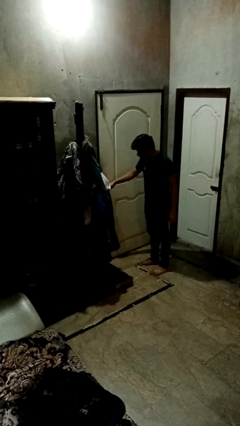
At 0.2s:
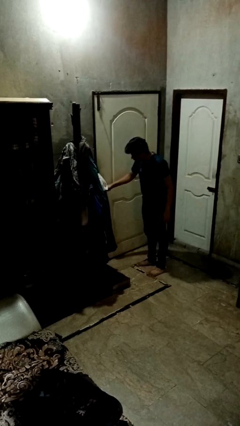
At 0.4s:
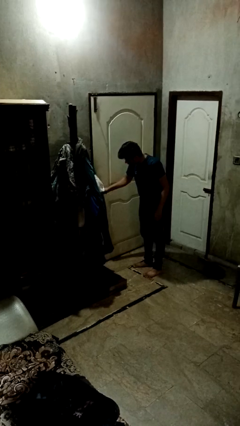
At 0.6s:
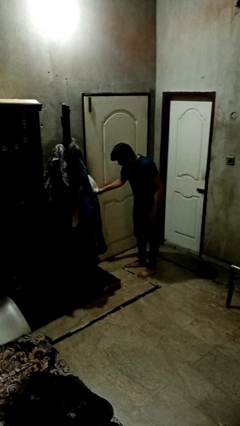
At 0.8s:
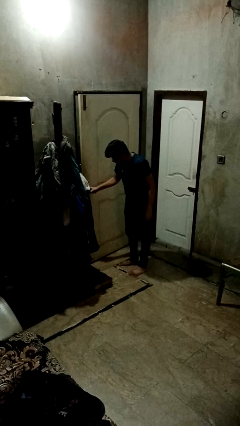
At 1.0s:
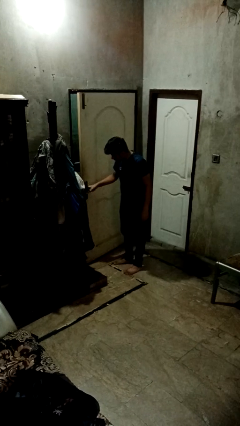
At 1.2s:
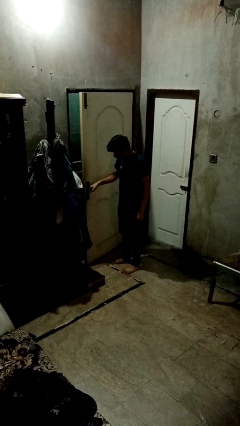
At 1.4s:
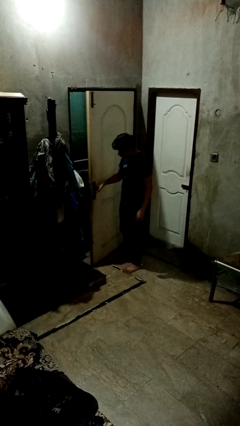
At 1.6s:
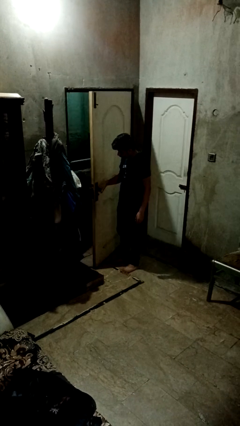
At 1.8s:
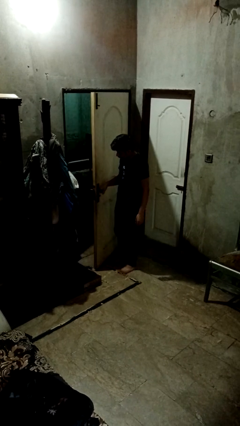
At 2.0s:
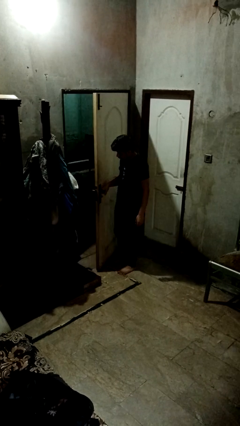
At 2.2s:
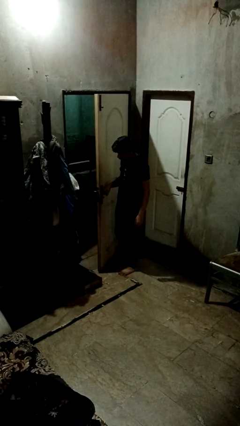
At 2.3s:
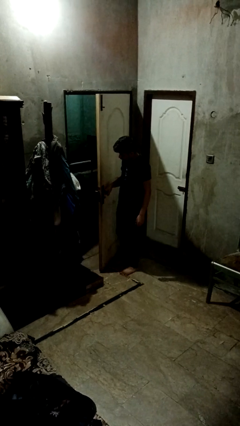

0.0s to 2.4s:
person opens facility door

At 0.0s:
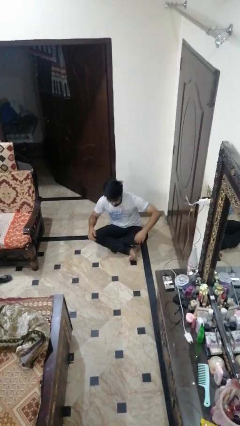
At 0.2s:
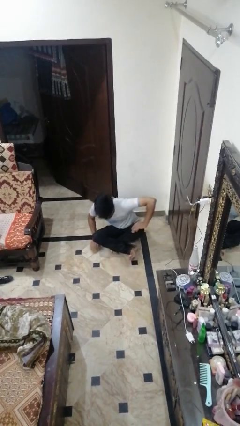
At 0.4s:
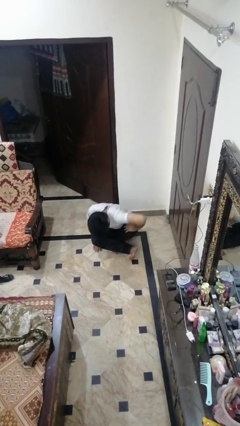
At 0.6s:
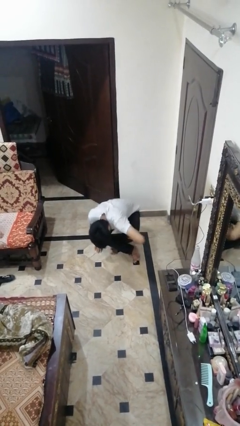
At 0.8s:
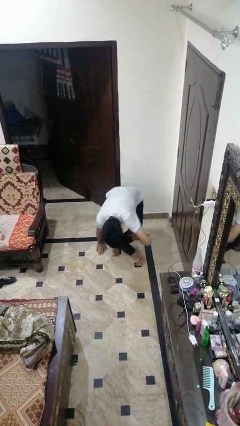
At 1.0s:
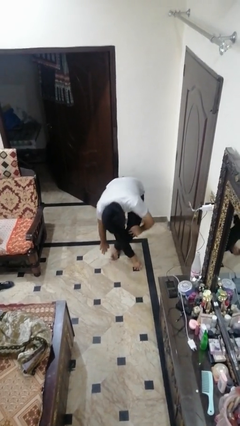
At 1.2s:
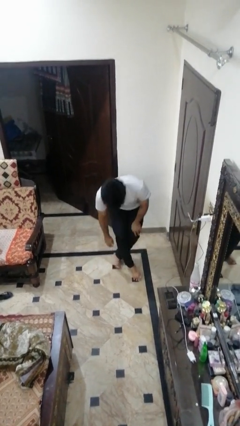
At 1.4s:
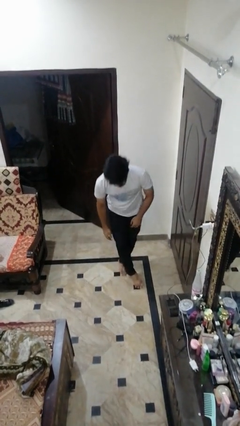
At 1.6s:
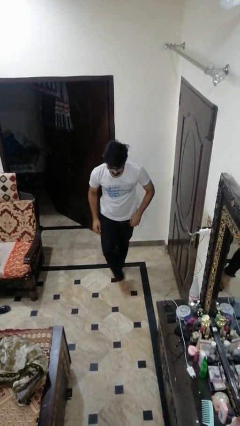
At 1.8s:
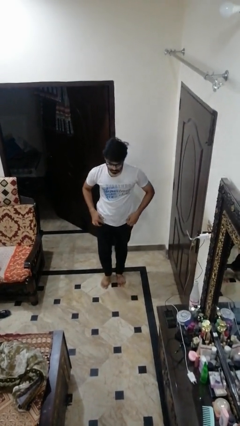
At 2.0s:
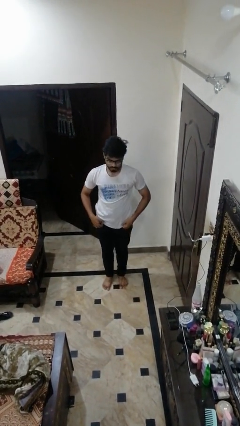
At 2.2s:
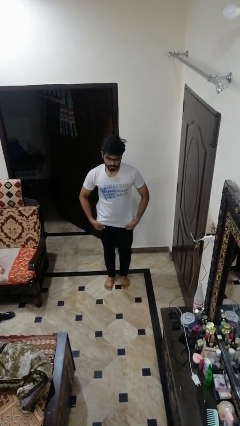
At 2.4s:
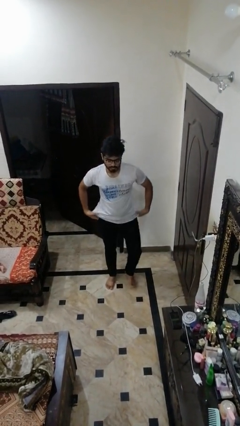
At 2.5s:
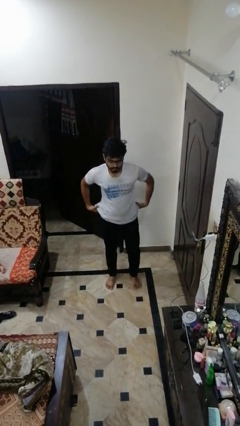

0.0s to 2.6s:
person stands up from floor

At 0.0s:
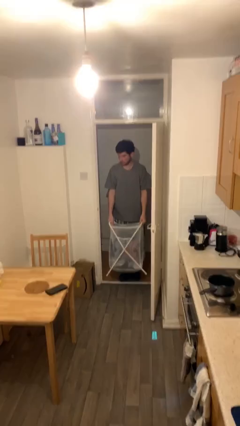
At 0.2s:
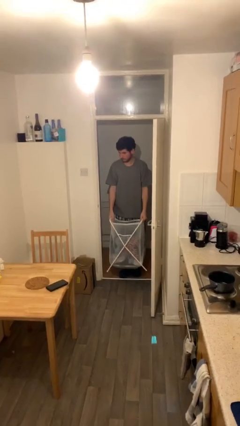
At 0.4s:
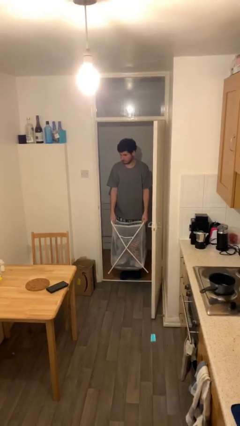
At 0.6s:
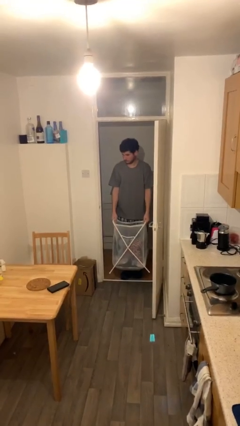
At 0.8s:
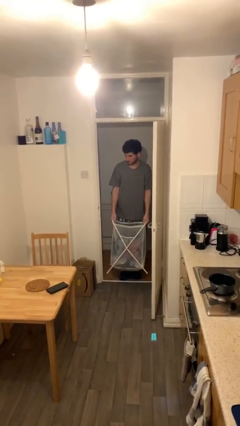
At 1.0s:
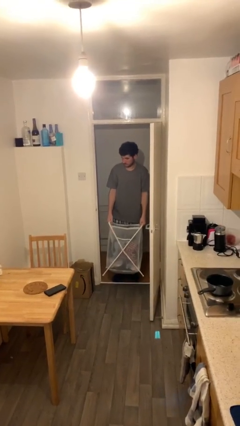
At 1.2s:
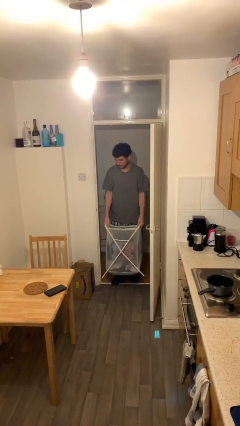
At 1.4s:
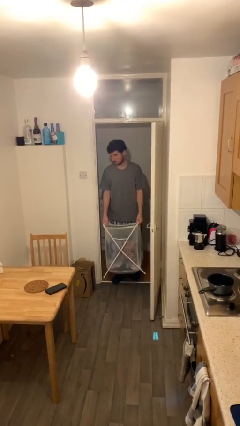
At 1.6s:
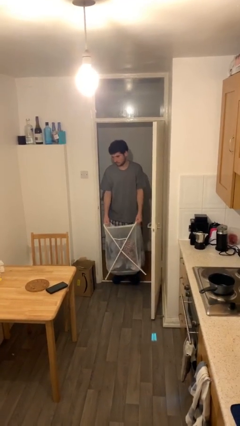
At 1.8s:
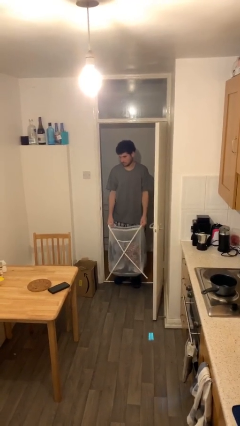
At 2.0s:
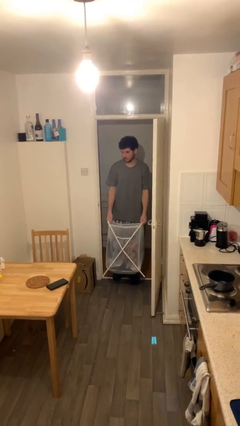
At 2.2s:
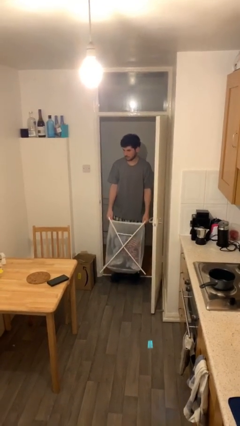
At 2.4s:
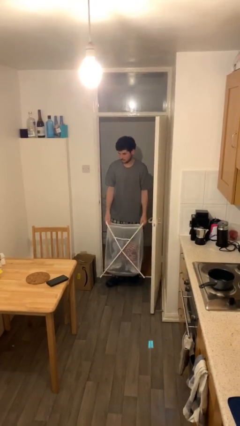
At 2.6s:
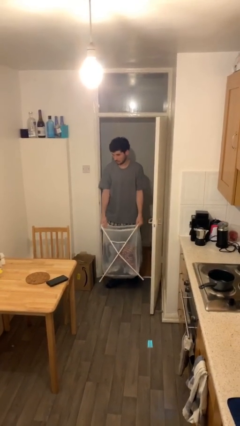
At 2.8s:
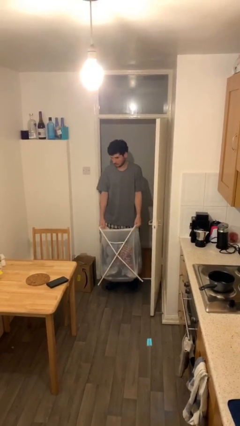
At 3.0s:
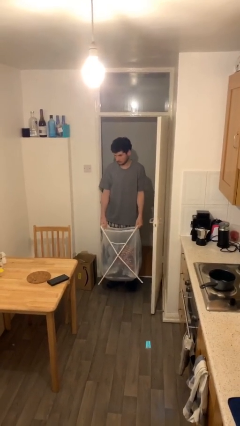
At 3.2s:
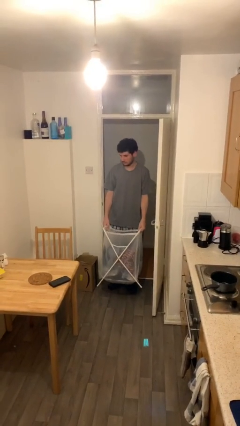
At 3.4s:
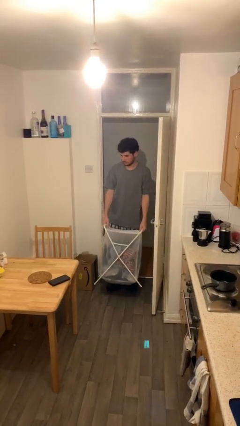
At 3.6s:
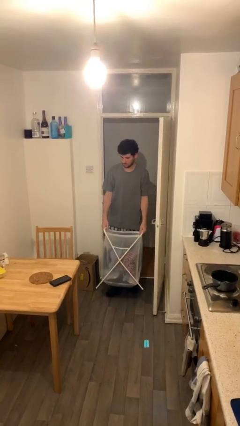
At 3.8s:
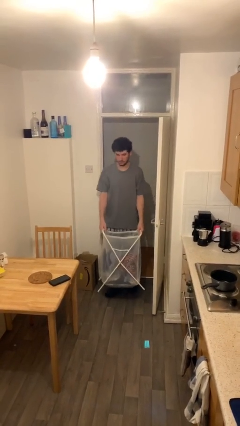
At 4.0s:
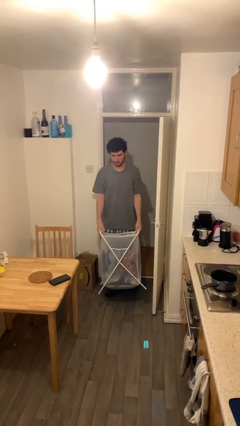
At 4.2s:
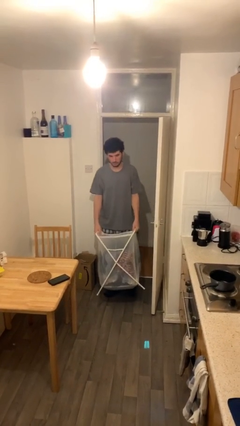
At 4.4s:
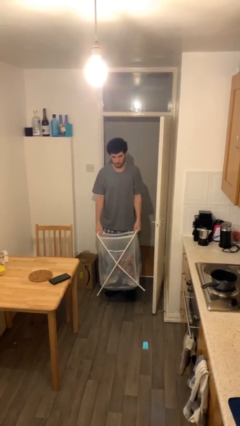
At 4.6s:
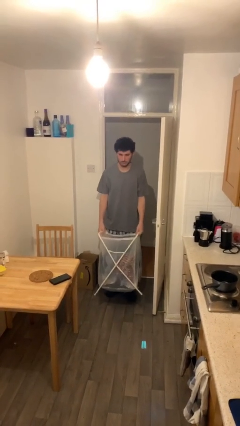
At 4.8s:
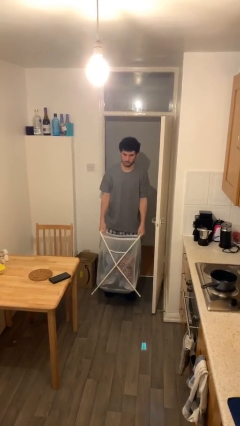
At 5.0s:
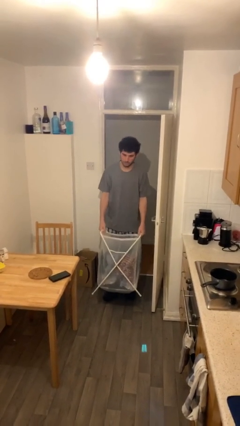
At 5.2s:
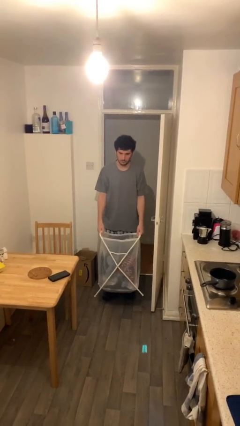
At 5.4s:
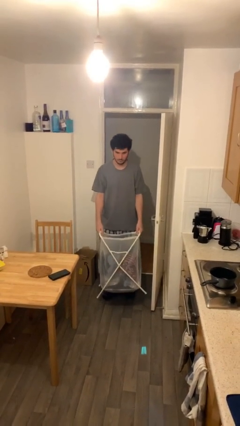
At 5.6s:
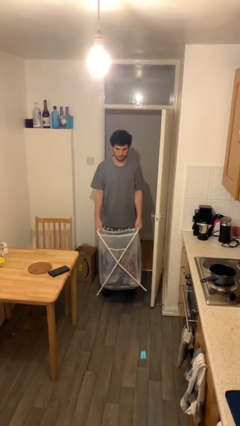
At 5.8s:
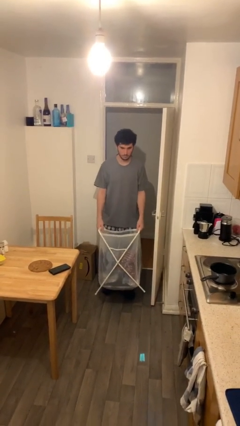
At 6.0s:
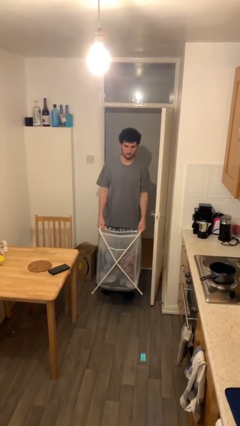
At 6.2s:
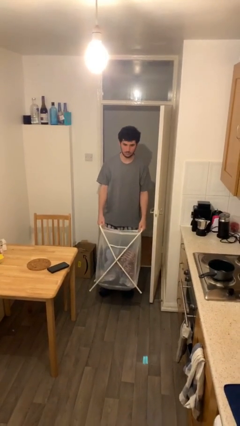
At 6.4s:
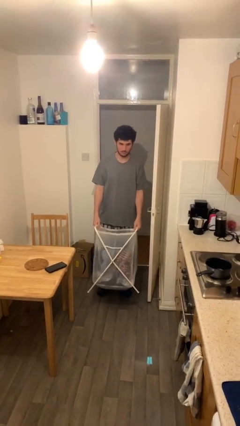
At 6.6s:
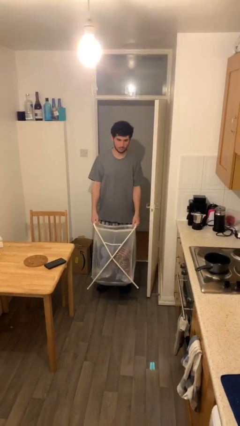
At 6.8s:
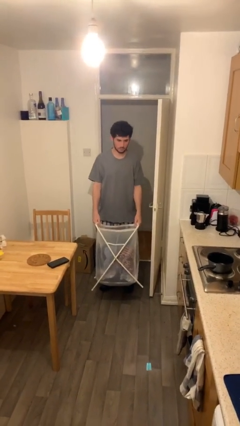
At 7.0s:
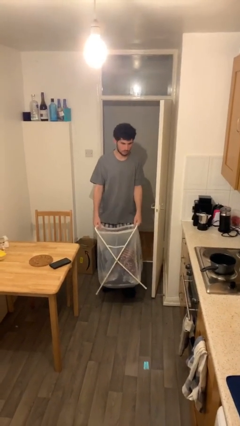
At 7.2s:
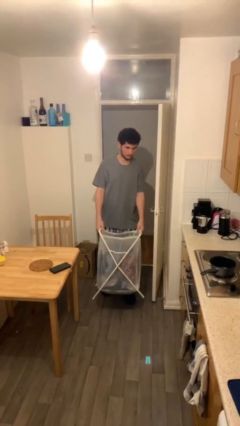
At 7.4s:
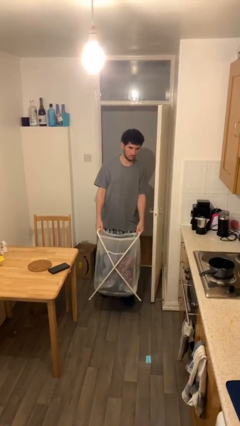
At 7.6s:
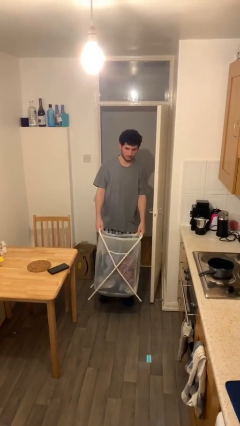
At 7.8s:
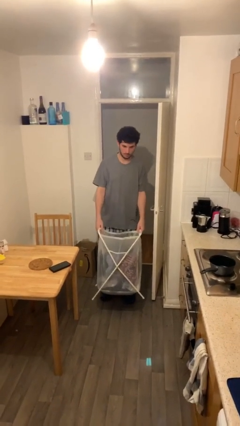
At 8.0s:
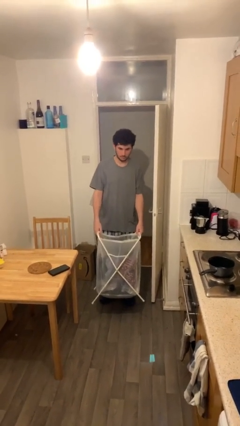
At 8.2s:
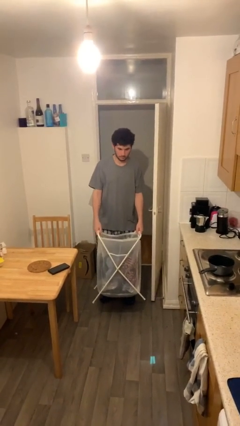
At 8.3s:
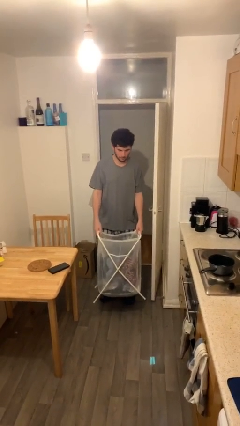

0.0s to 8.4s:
person carries heavy object

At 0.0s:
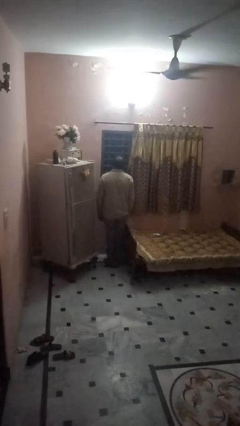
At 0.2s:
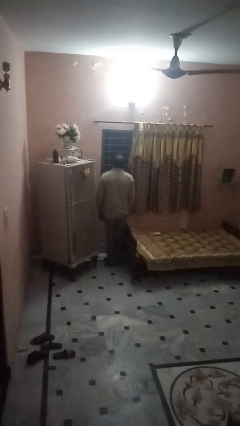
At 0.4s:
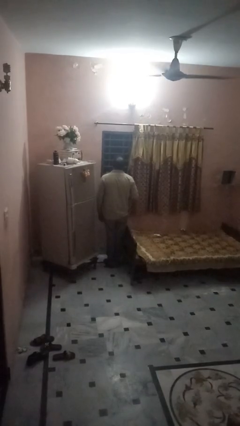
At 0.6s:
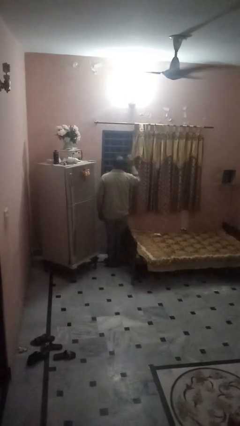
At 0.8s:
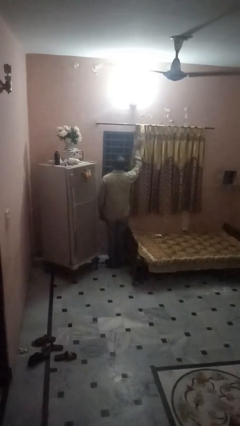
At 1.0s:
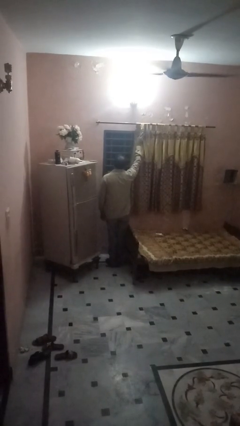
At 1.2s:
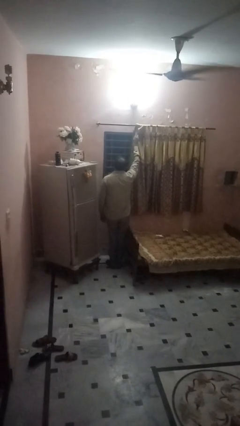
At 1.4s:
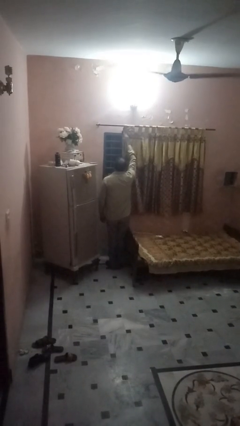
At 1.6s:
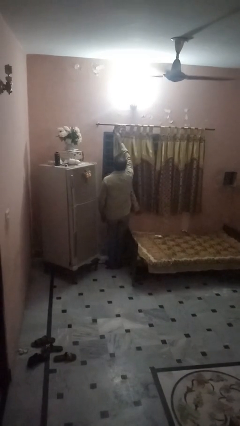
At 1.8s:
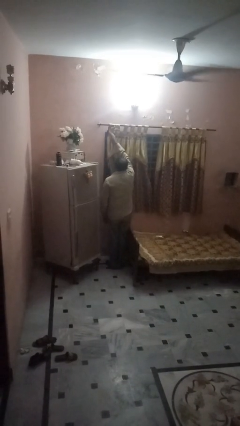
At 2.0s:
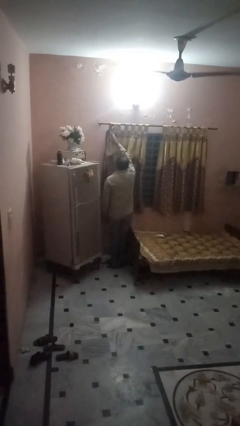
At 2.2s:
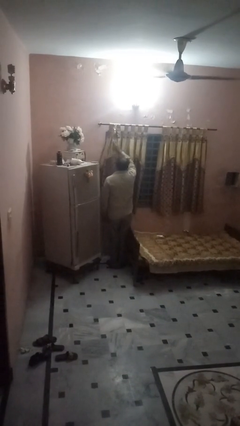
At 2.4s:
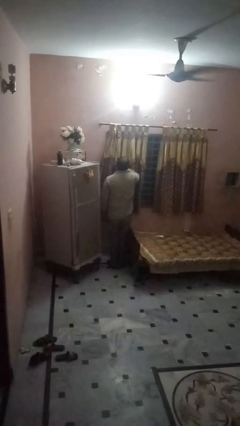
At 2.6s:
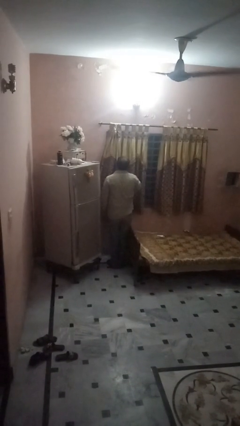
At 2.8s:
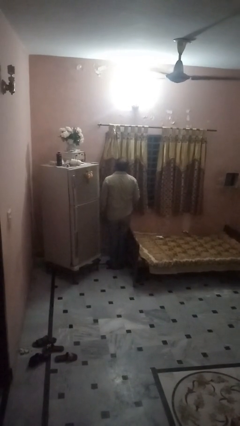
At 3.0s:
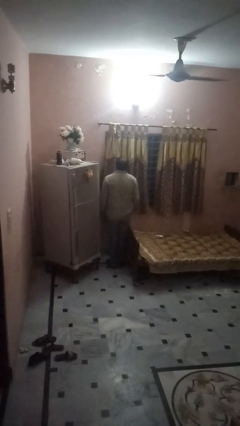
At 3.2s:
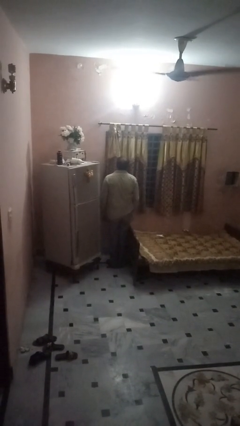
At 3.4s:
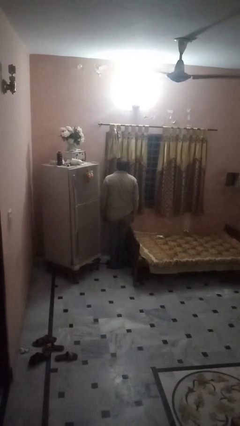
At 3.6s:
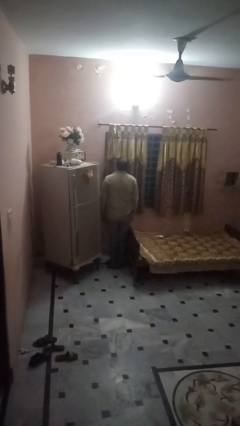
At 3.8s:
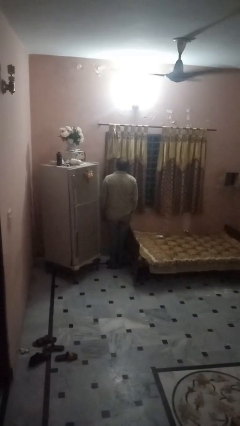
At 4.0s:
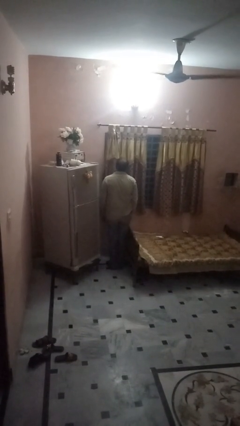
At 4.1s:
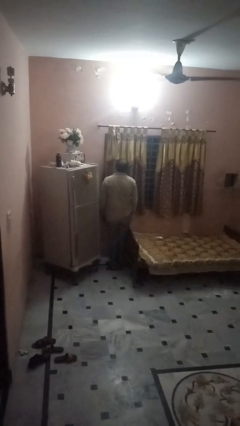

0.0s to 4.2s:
person closes curtains

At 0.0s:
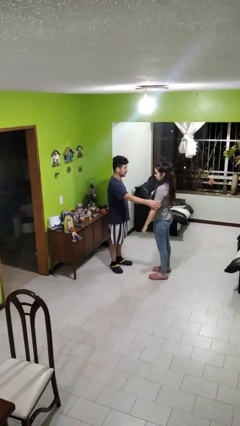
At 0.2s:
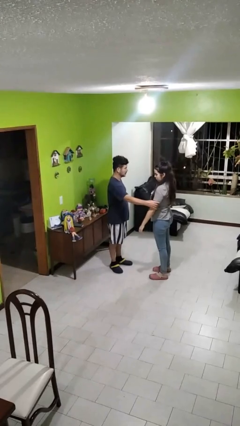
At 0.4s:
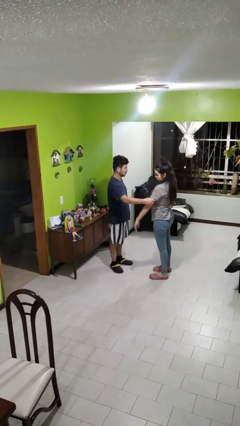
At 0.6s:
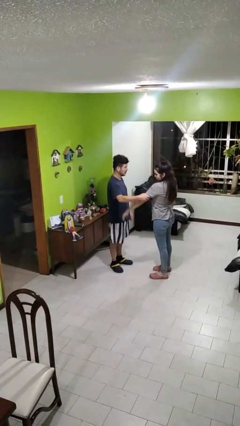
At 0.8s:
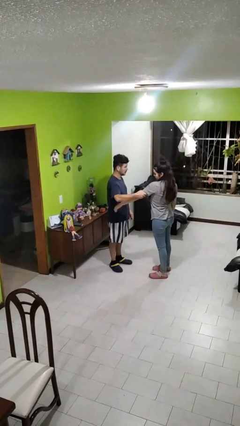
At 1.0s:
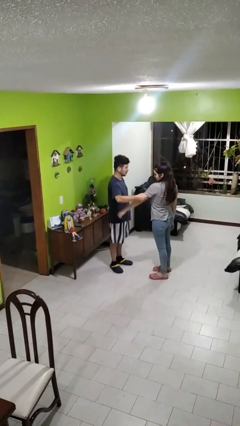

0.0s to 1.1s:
person grabs person by bicep
